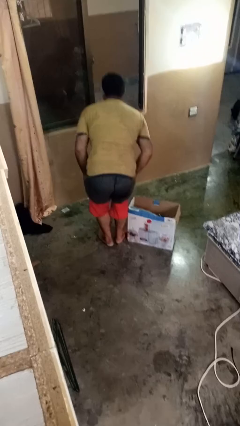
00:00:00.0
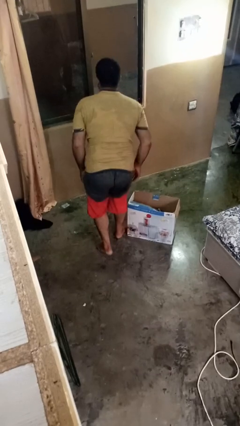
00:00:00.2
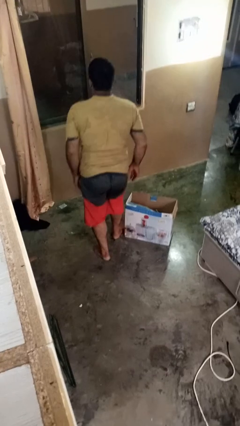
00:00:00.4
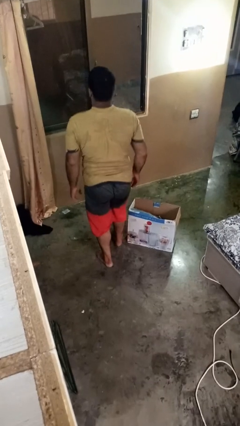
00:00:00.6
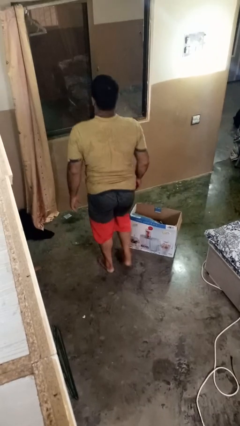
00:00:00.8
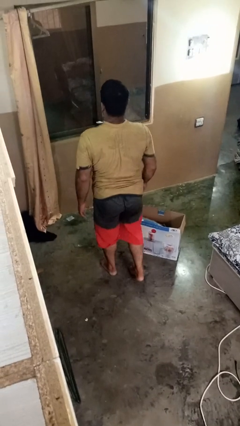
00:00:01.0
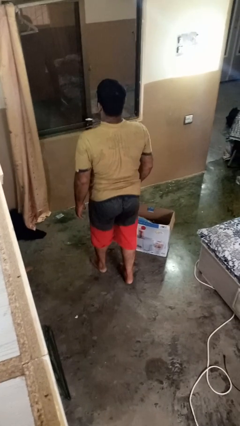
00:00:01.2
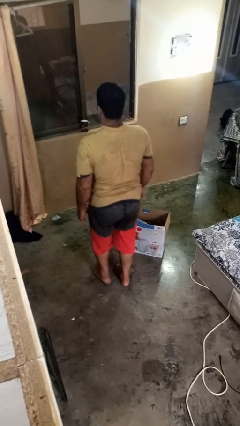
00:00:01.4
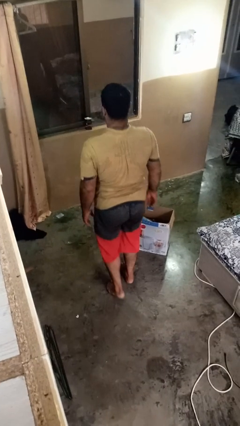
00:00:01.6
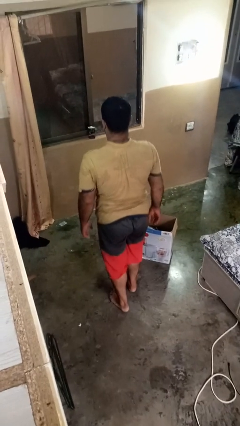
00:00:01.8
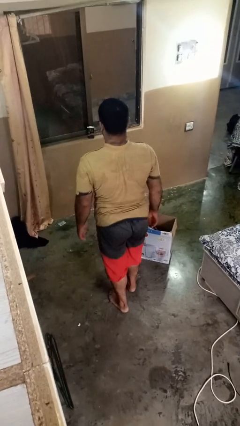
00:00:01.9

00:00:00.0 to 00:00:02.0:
person stands up from floor

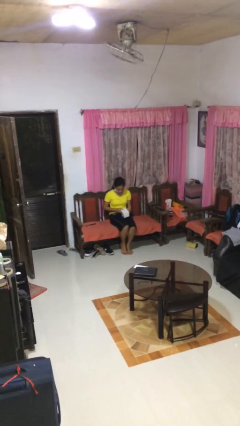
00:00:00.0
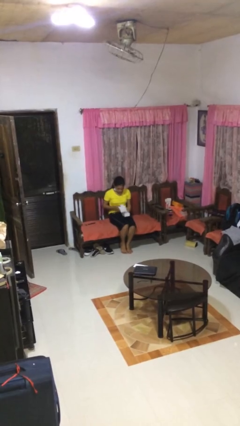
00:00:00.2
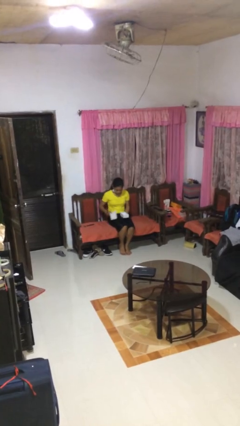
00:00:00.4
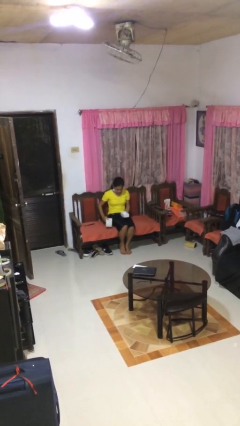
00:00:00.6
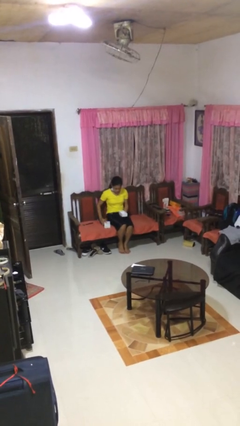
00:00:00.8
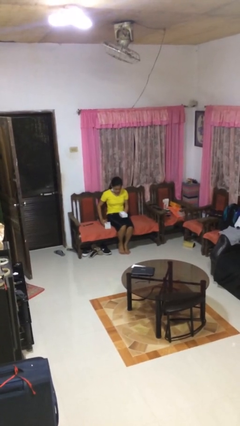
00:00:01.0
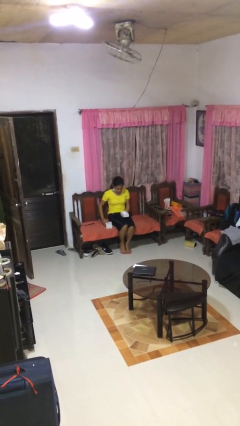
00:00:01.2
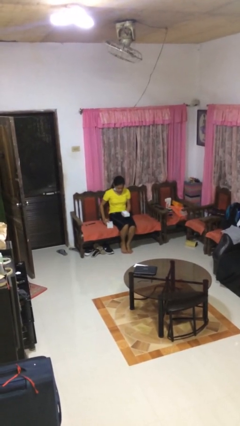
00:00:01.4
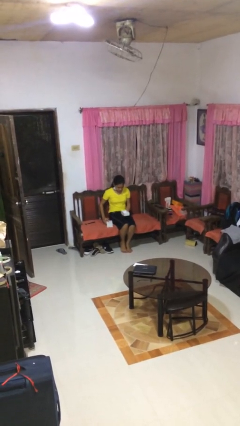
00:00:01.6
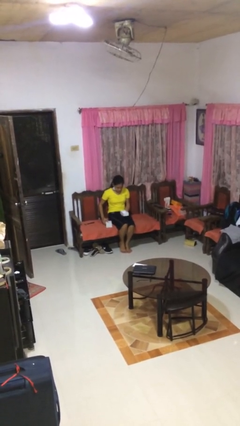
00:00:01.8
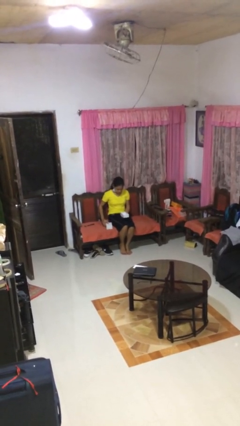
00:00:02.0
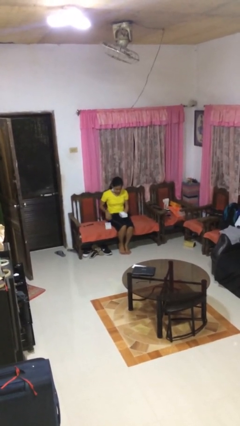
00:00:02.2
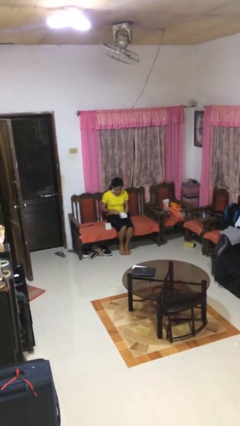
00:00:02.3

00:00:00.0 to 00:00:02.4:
person opens jewelry box

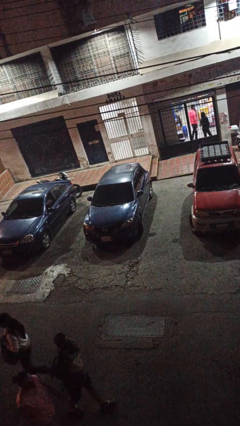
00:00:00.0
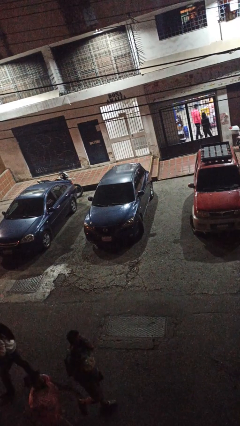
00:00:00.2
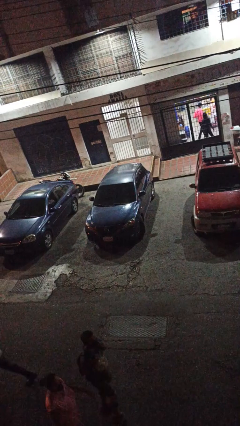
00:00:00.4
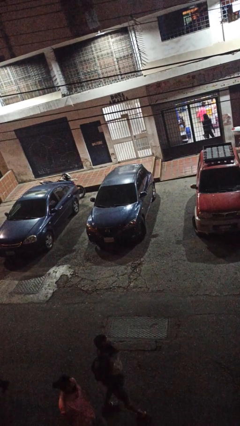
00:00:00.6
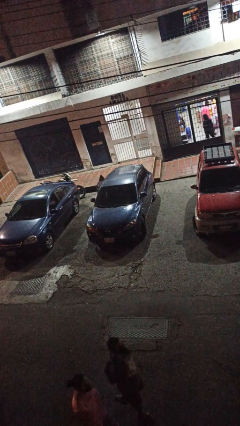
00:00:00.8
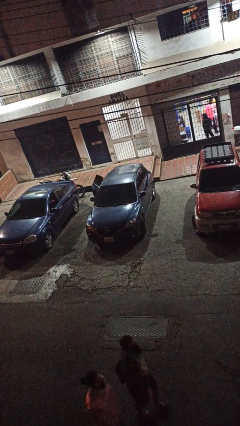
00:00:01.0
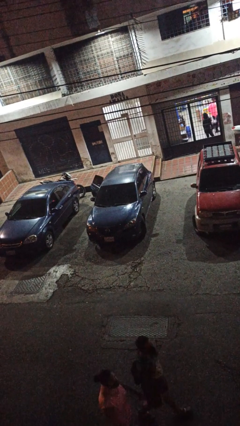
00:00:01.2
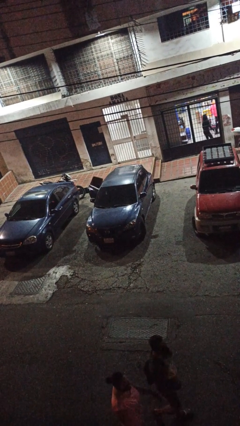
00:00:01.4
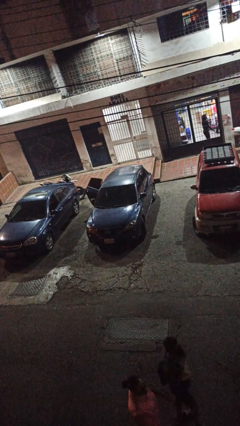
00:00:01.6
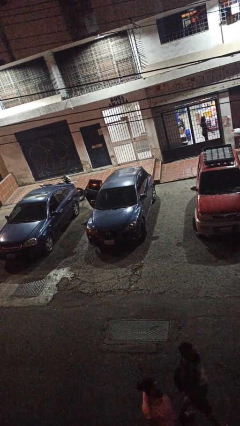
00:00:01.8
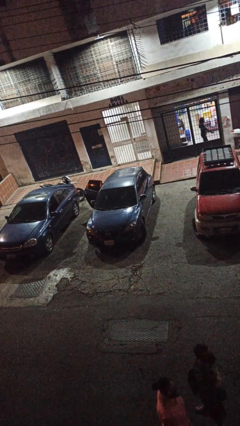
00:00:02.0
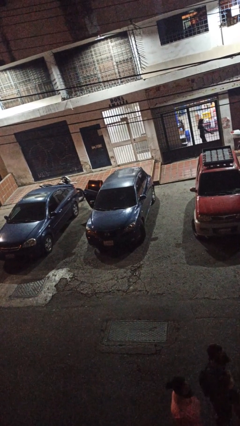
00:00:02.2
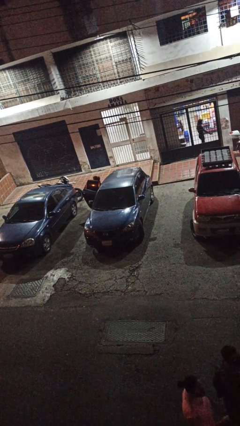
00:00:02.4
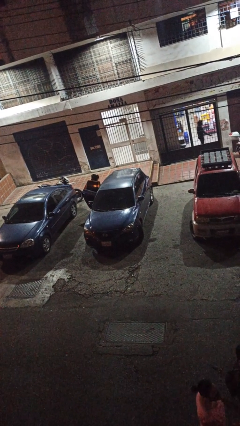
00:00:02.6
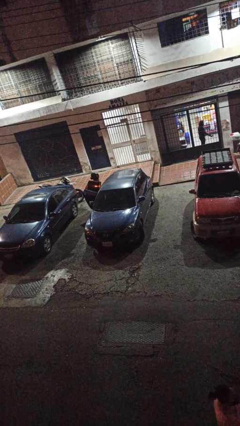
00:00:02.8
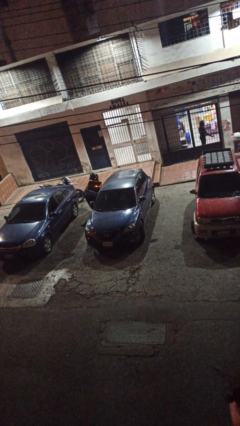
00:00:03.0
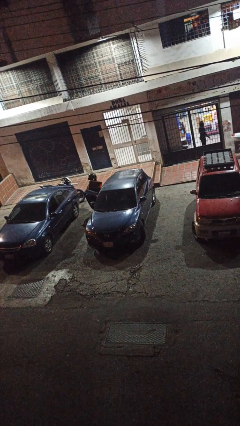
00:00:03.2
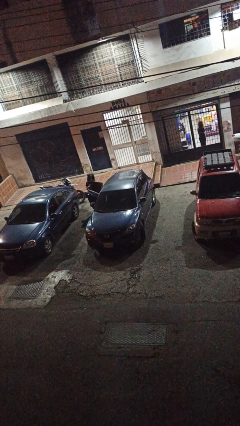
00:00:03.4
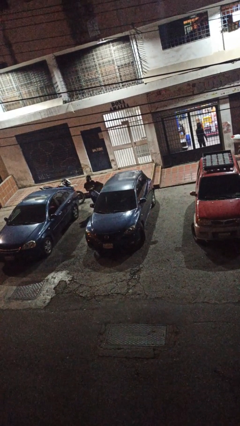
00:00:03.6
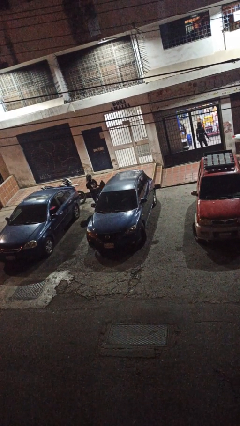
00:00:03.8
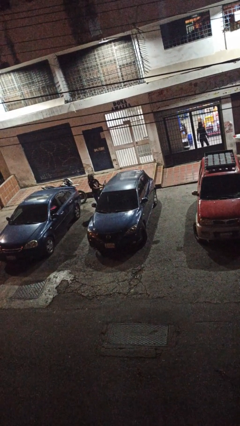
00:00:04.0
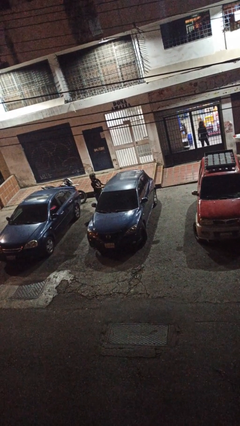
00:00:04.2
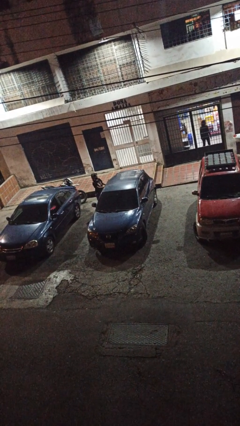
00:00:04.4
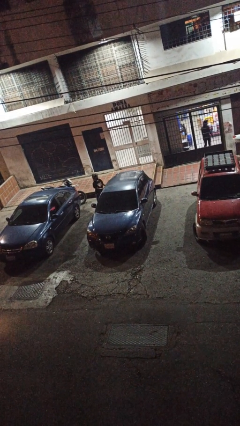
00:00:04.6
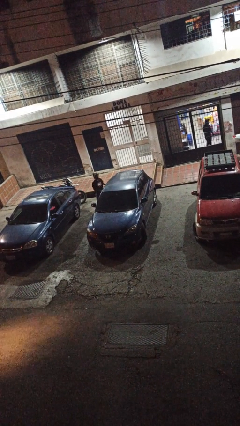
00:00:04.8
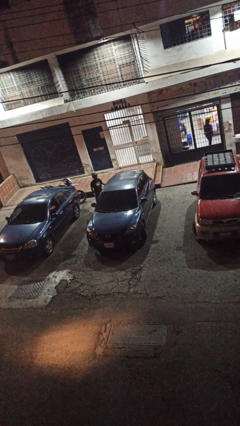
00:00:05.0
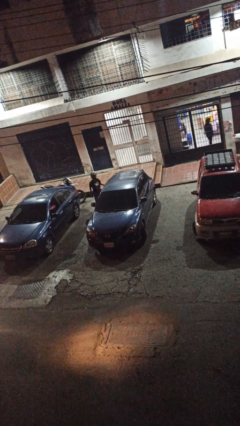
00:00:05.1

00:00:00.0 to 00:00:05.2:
car drops off person

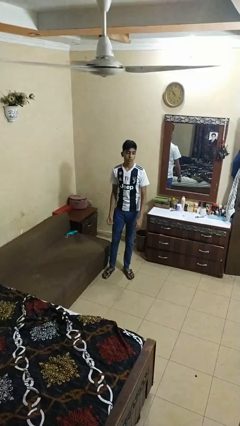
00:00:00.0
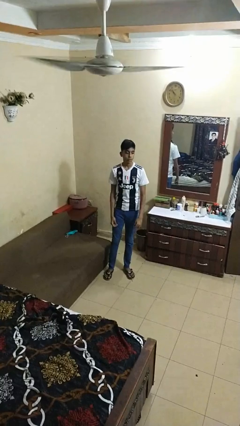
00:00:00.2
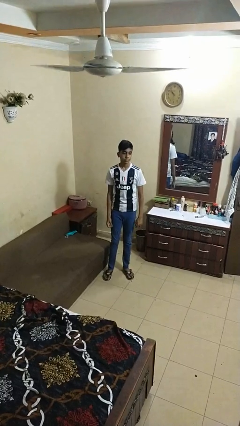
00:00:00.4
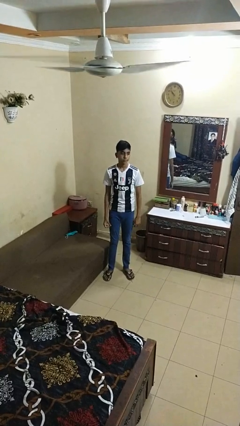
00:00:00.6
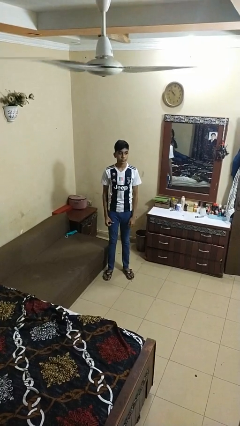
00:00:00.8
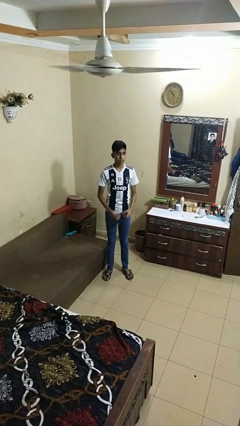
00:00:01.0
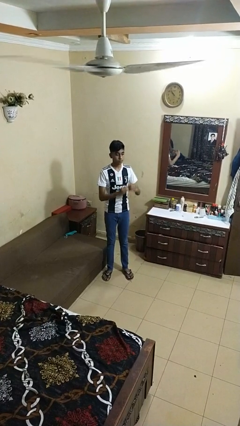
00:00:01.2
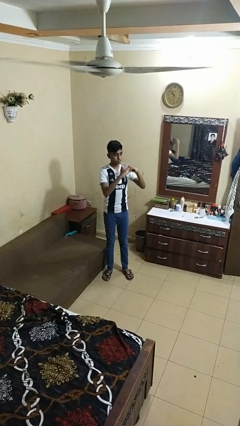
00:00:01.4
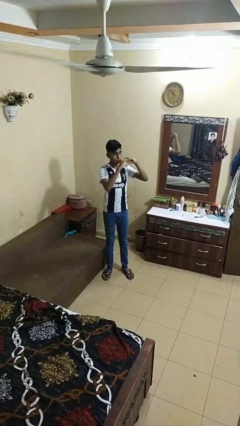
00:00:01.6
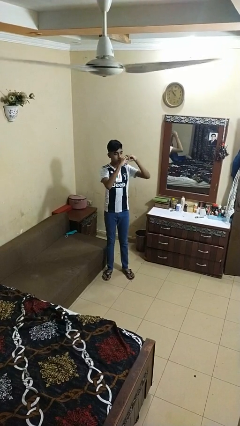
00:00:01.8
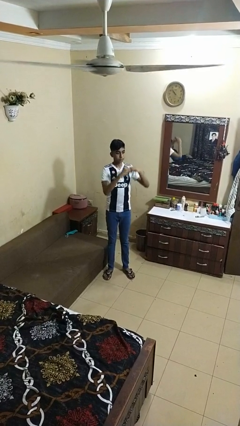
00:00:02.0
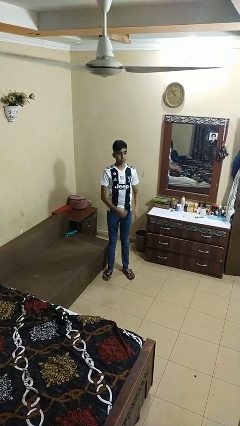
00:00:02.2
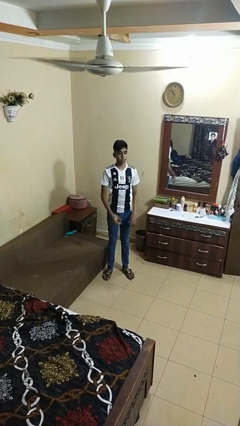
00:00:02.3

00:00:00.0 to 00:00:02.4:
person gestures heart

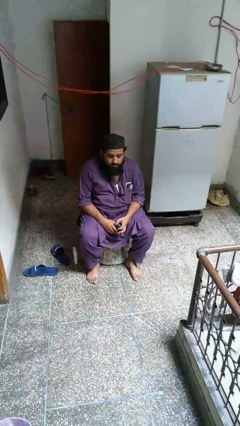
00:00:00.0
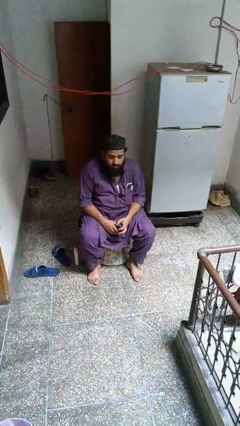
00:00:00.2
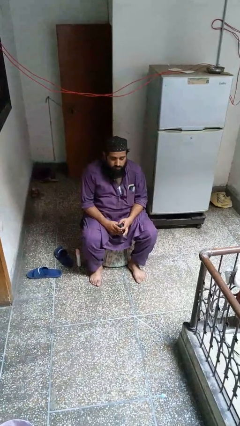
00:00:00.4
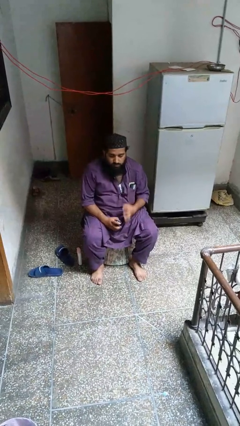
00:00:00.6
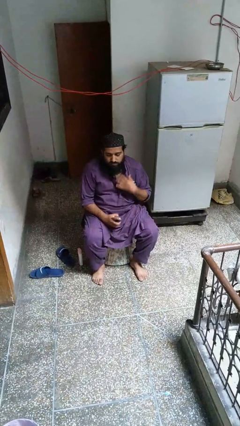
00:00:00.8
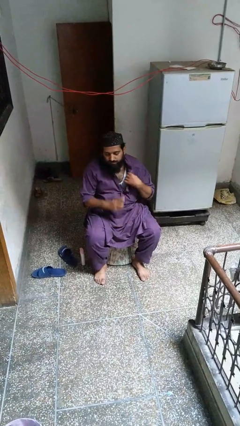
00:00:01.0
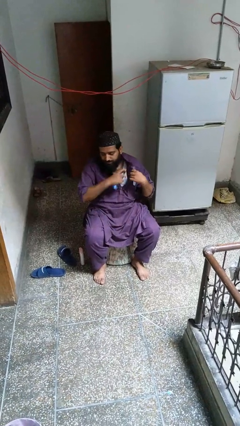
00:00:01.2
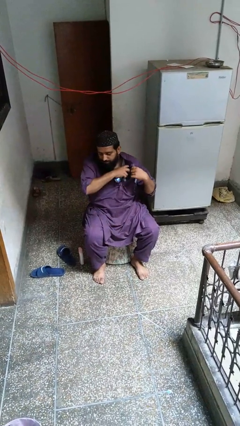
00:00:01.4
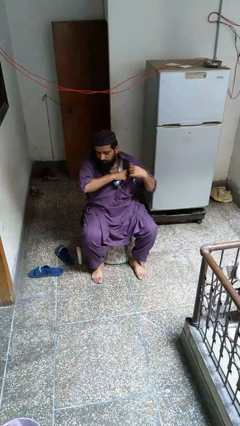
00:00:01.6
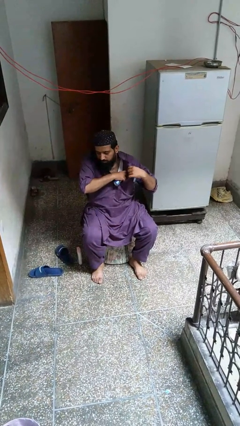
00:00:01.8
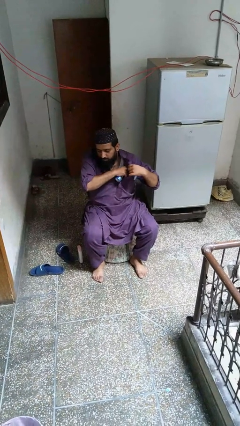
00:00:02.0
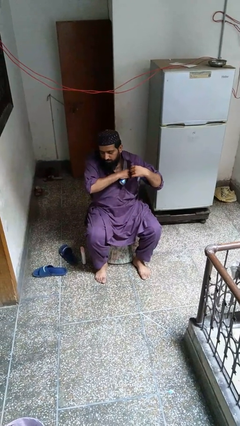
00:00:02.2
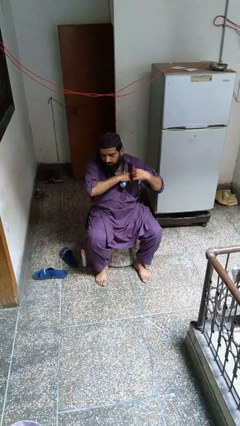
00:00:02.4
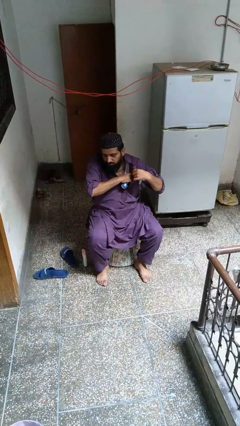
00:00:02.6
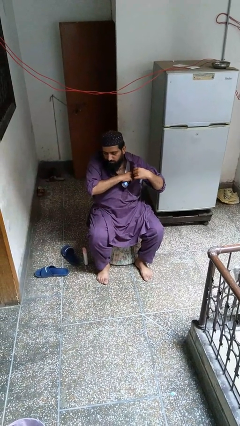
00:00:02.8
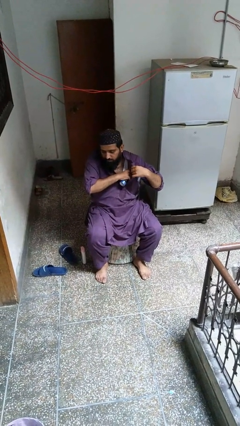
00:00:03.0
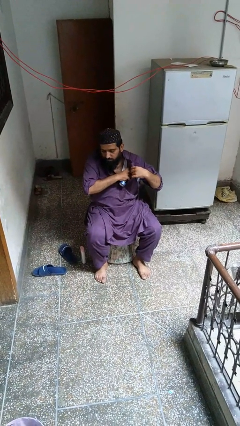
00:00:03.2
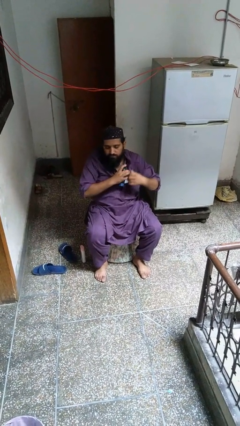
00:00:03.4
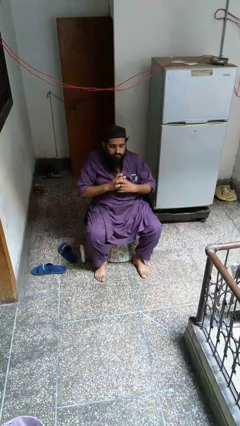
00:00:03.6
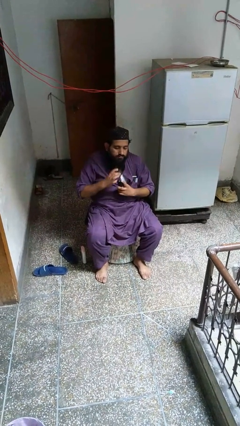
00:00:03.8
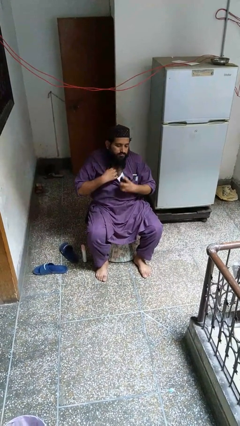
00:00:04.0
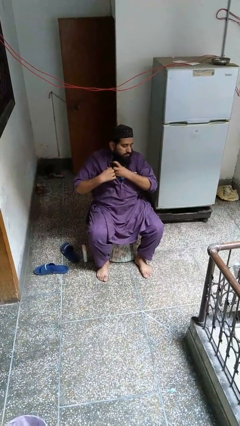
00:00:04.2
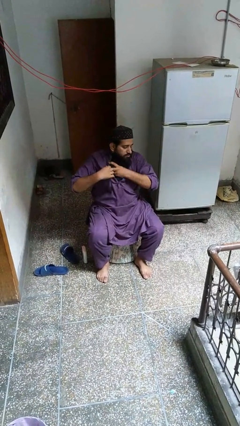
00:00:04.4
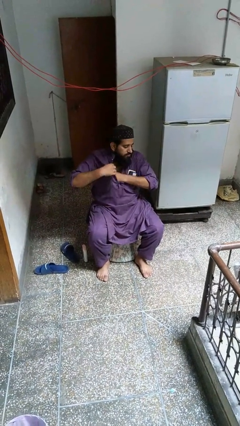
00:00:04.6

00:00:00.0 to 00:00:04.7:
person applies deodorant

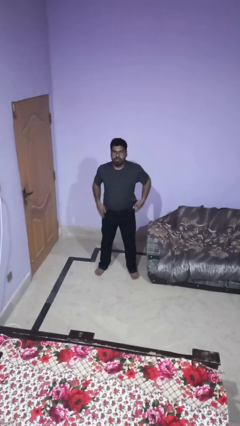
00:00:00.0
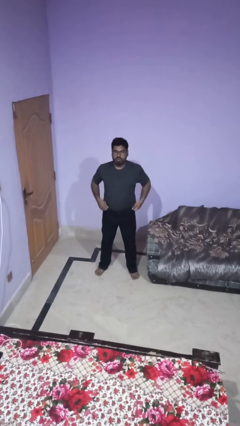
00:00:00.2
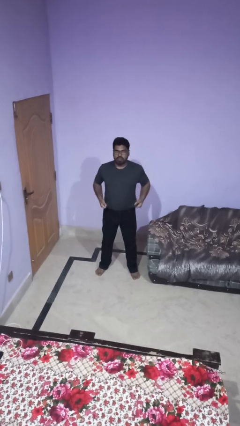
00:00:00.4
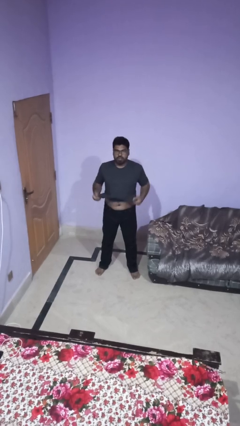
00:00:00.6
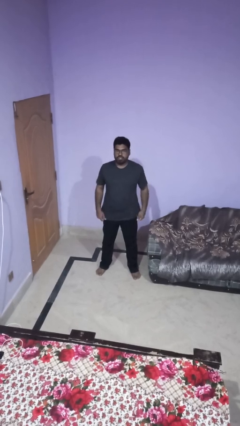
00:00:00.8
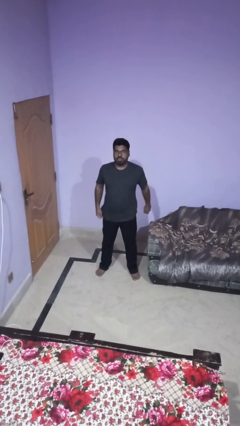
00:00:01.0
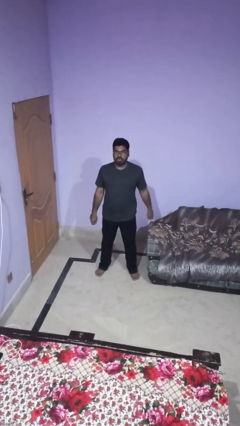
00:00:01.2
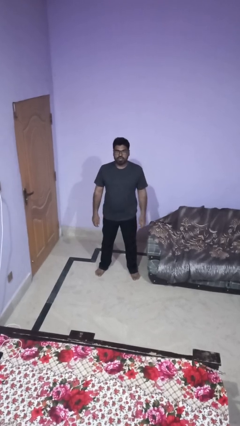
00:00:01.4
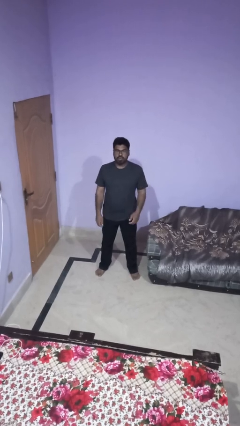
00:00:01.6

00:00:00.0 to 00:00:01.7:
person untucks shirt
